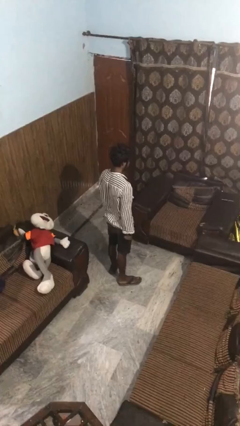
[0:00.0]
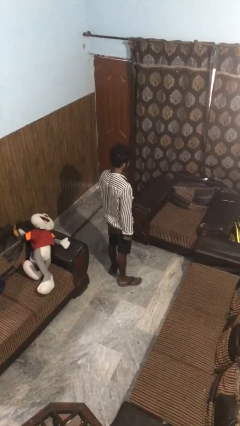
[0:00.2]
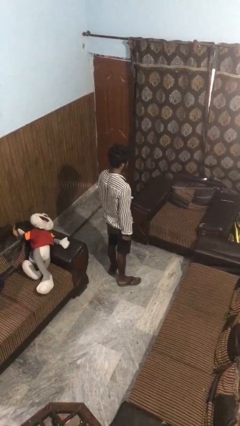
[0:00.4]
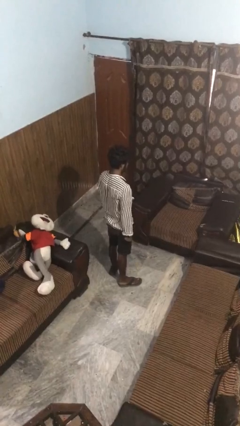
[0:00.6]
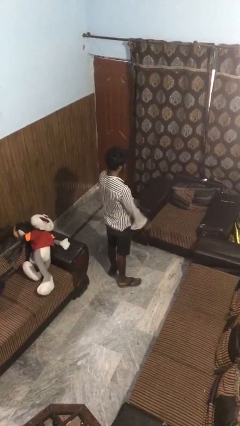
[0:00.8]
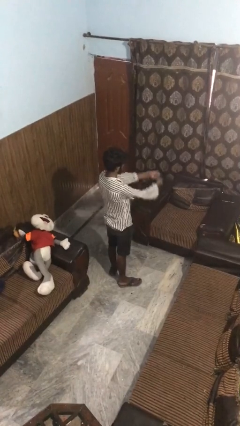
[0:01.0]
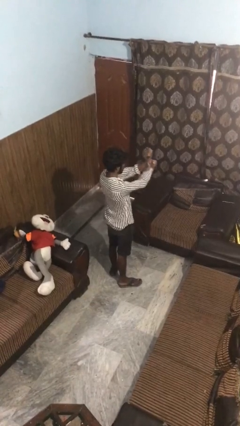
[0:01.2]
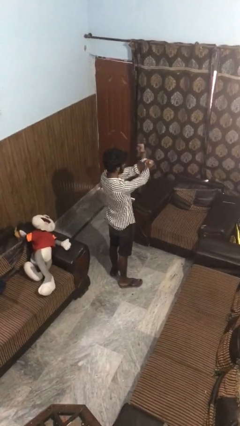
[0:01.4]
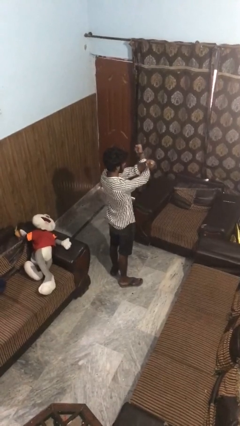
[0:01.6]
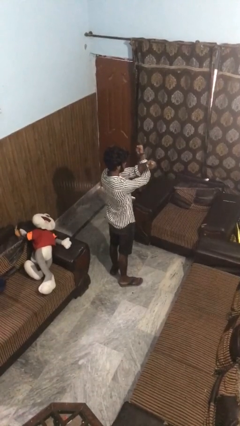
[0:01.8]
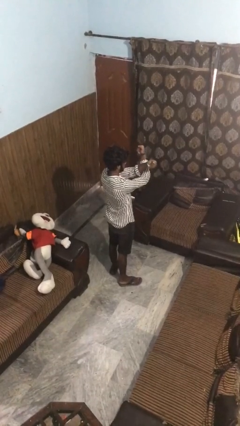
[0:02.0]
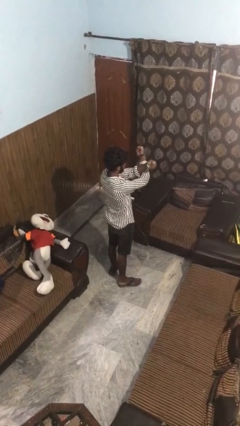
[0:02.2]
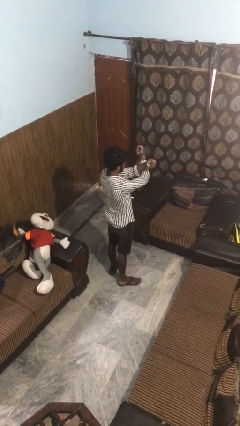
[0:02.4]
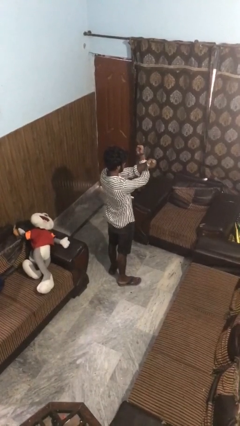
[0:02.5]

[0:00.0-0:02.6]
person gestures arms x

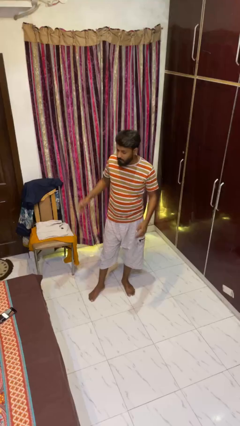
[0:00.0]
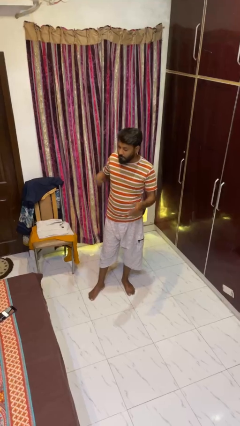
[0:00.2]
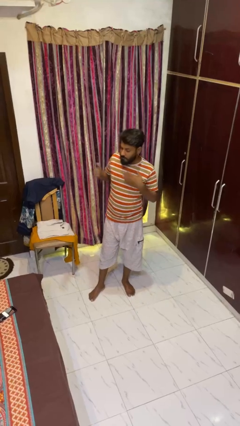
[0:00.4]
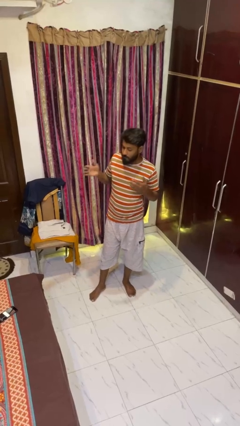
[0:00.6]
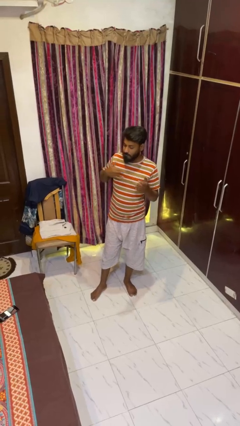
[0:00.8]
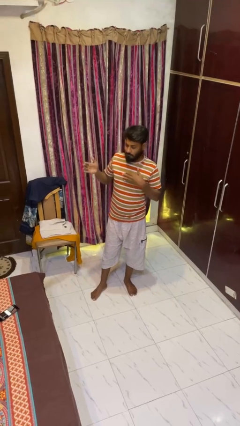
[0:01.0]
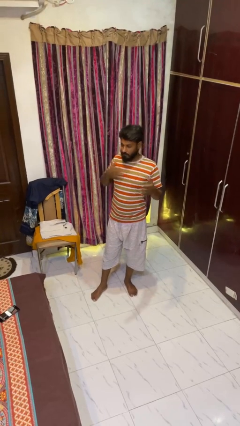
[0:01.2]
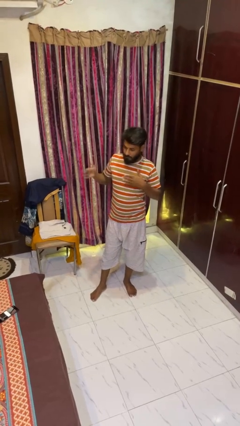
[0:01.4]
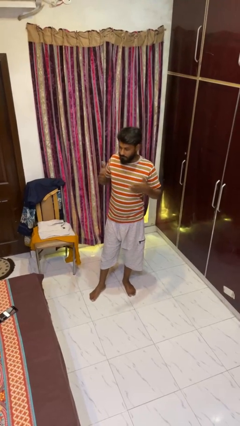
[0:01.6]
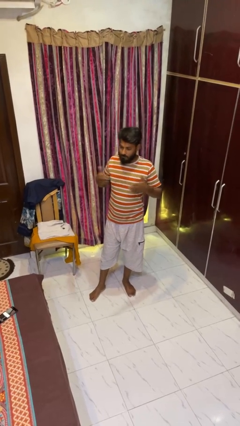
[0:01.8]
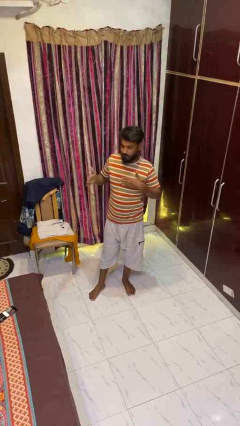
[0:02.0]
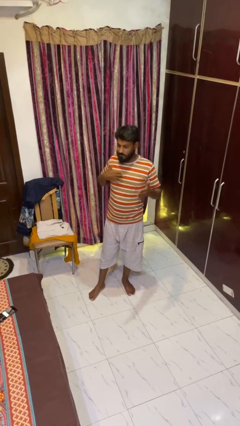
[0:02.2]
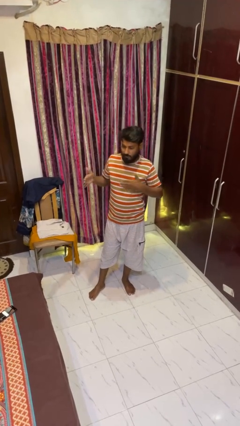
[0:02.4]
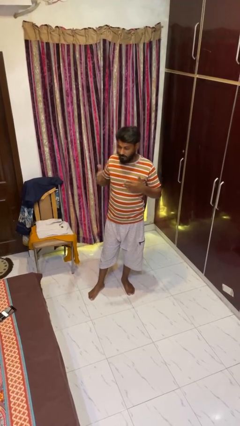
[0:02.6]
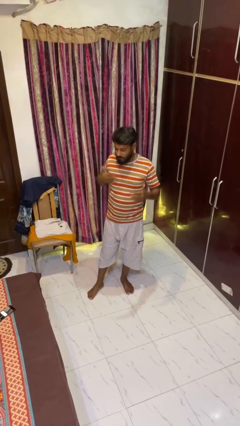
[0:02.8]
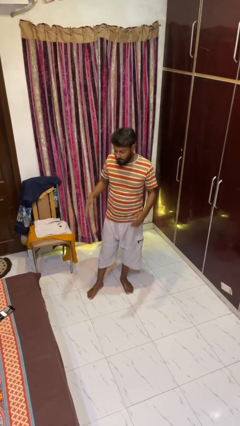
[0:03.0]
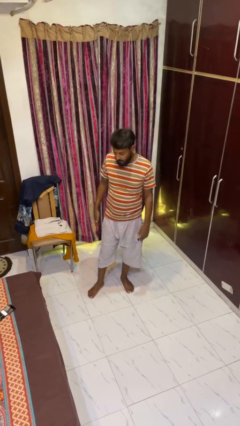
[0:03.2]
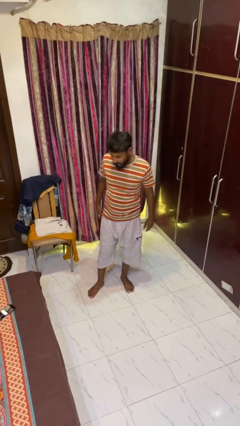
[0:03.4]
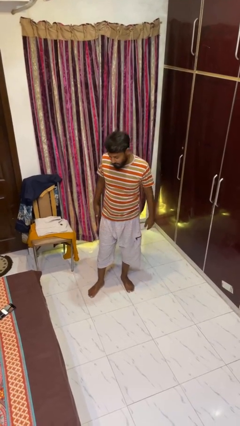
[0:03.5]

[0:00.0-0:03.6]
person drums on chest

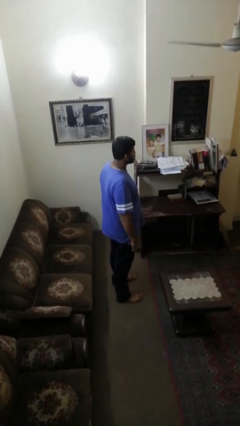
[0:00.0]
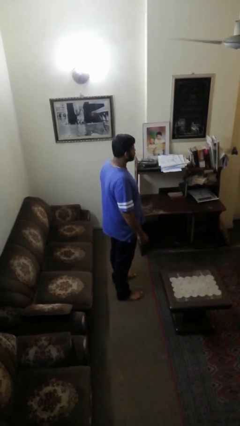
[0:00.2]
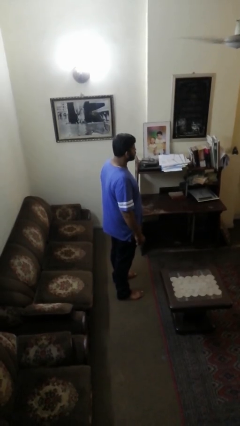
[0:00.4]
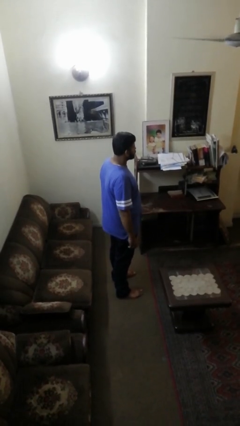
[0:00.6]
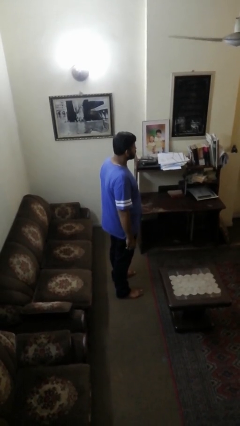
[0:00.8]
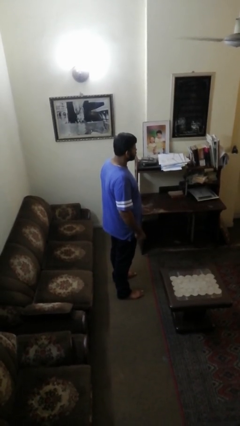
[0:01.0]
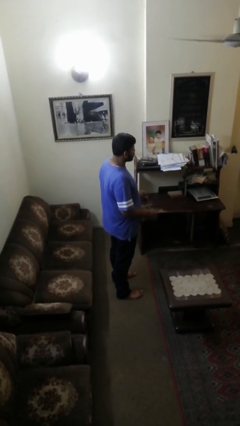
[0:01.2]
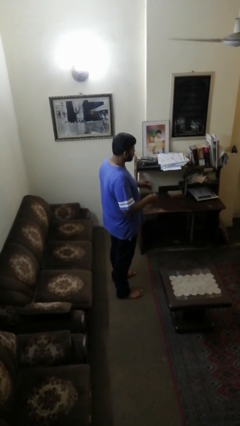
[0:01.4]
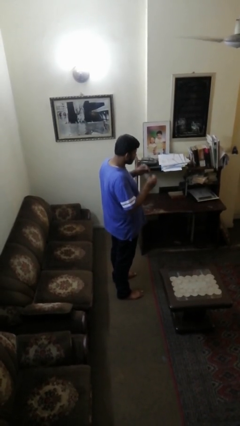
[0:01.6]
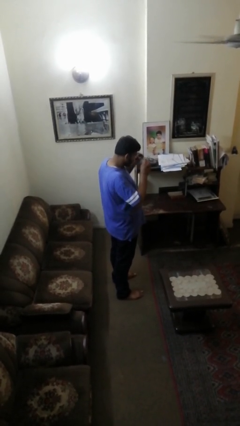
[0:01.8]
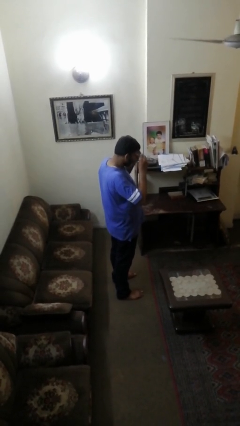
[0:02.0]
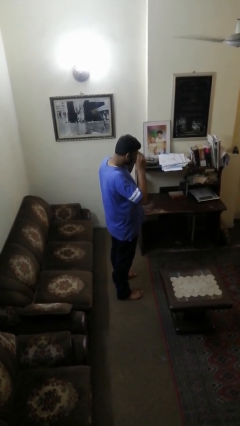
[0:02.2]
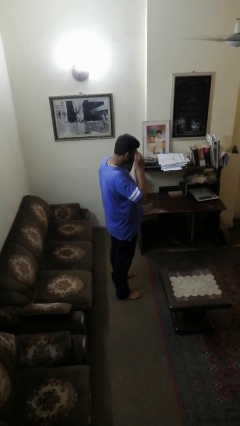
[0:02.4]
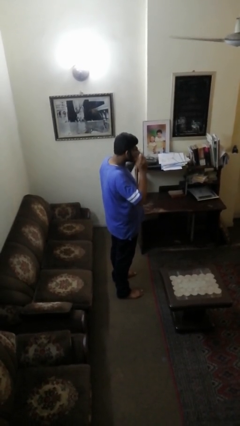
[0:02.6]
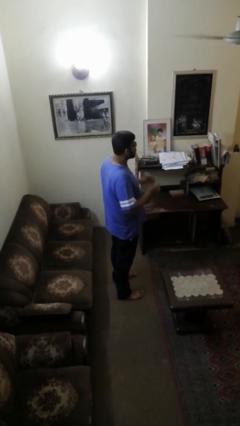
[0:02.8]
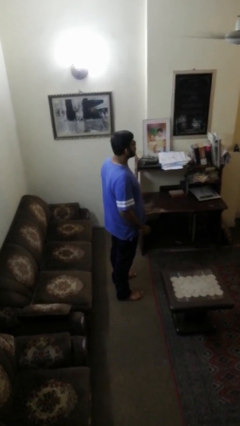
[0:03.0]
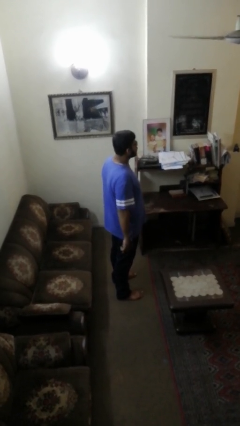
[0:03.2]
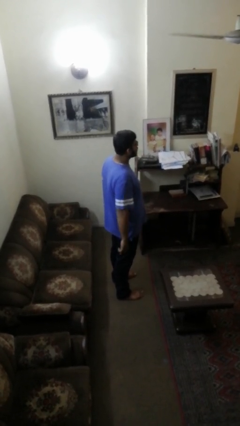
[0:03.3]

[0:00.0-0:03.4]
person puts on sunglasses

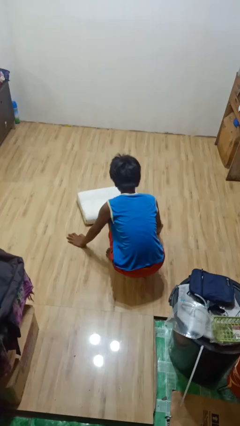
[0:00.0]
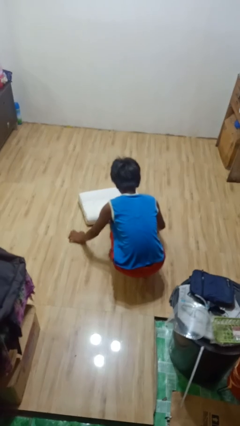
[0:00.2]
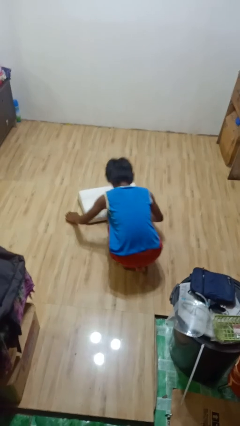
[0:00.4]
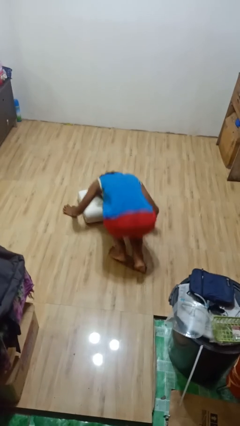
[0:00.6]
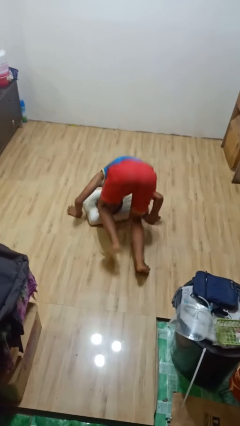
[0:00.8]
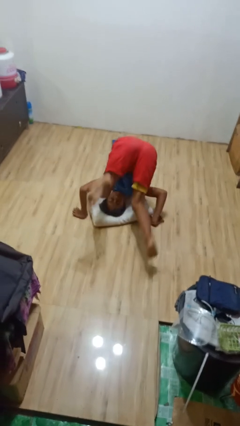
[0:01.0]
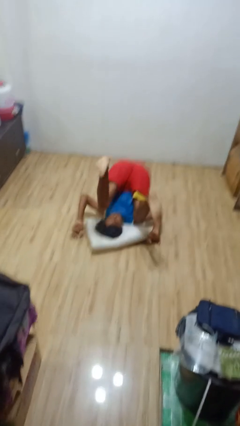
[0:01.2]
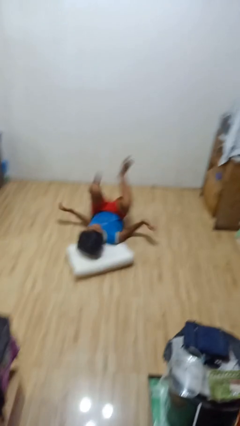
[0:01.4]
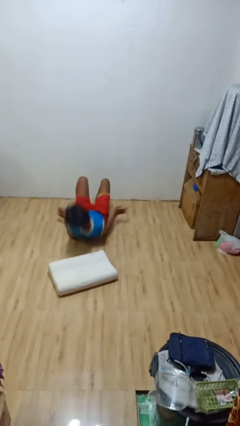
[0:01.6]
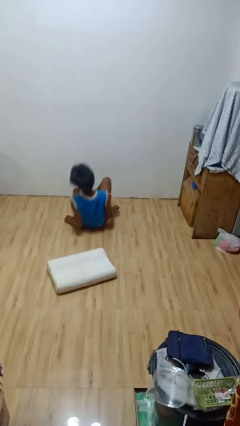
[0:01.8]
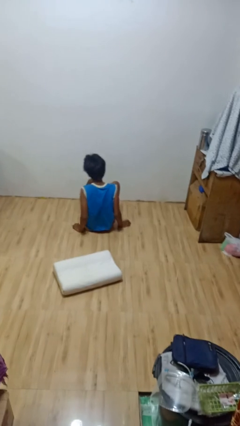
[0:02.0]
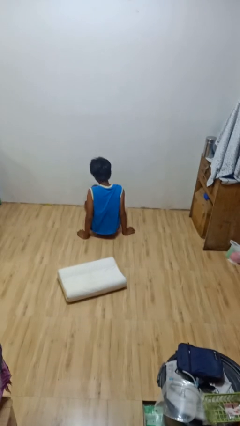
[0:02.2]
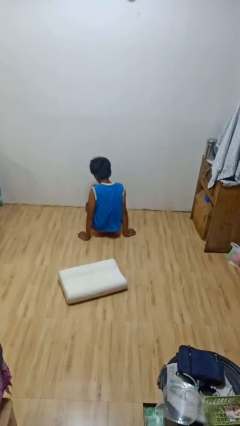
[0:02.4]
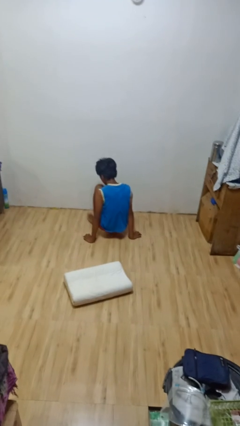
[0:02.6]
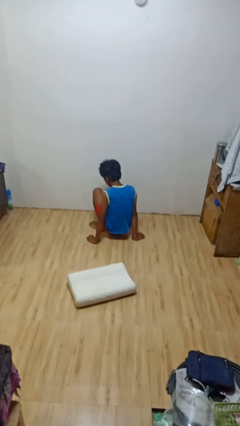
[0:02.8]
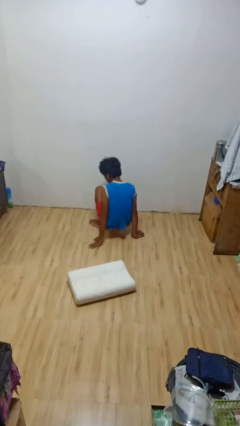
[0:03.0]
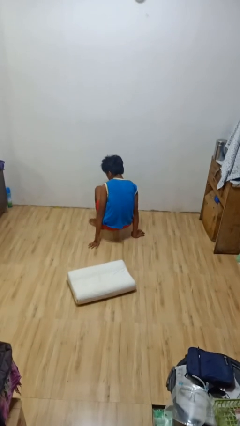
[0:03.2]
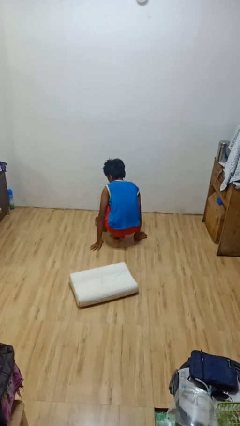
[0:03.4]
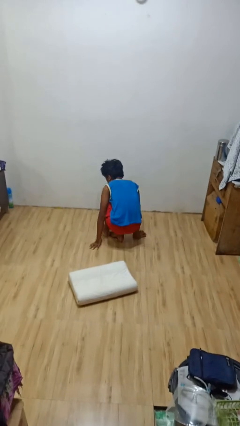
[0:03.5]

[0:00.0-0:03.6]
person somersaults

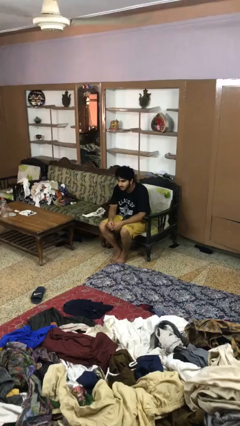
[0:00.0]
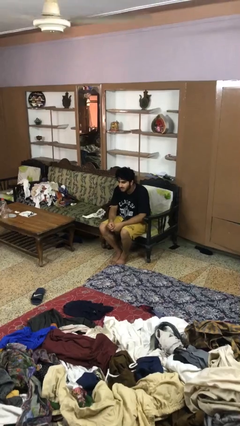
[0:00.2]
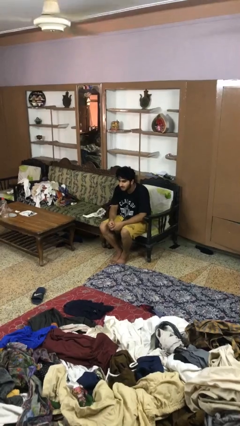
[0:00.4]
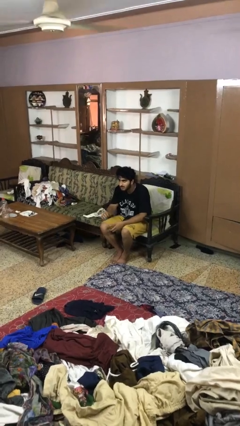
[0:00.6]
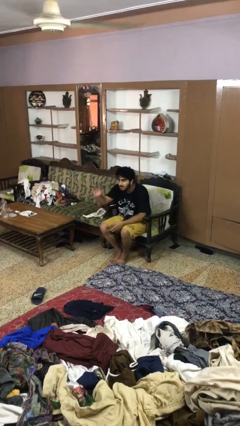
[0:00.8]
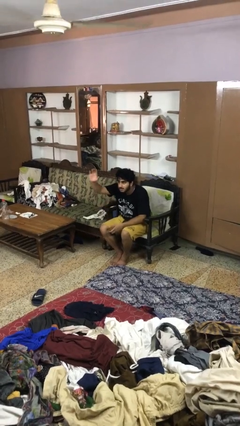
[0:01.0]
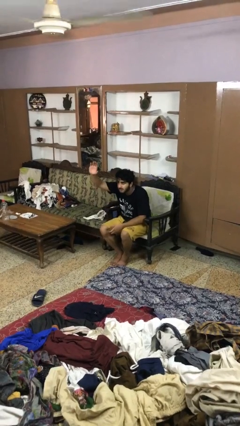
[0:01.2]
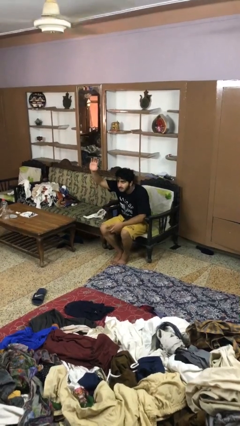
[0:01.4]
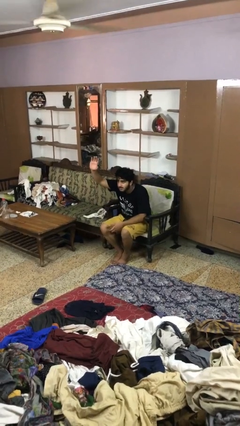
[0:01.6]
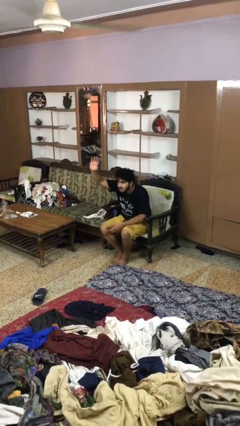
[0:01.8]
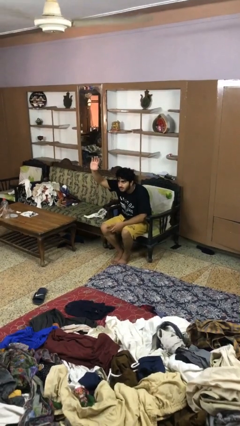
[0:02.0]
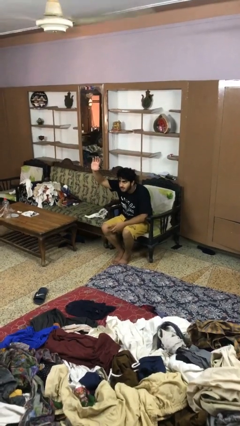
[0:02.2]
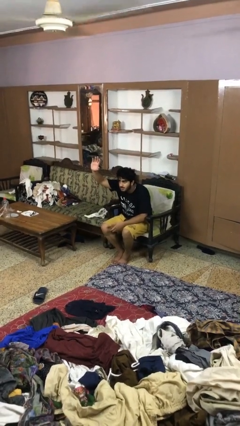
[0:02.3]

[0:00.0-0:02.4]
person gestures raise hand

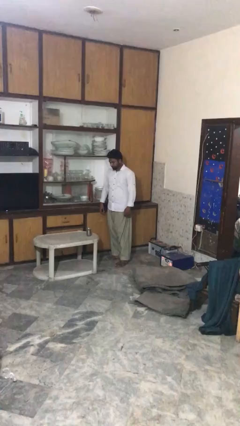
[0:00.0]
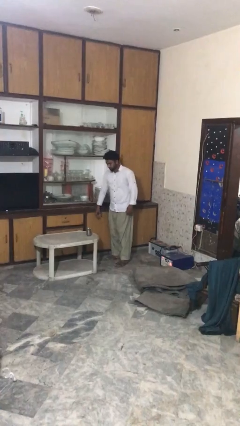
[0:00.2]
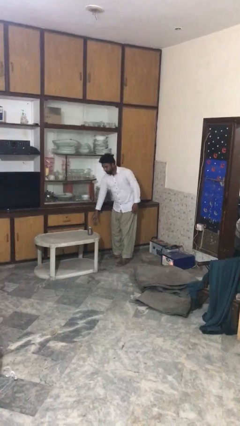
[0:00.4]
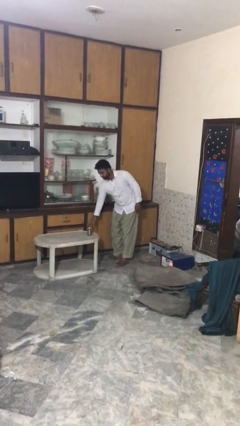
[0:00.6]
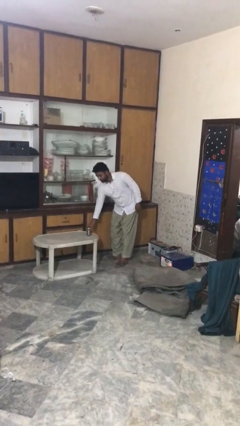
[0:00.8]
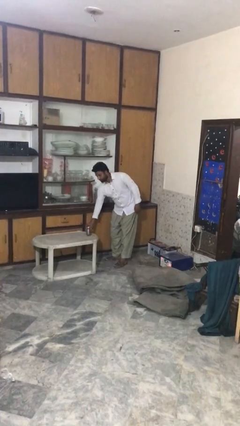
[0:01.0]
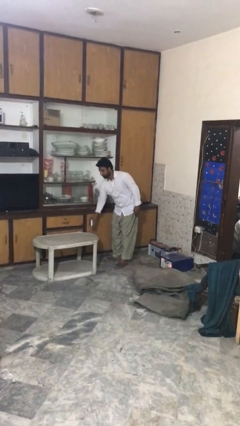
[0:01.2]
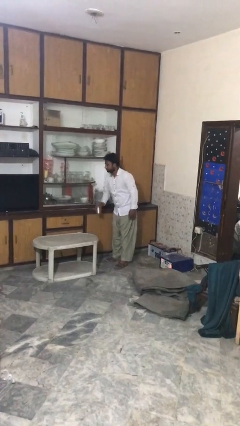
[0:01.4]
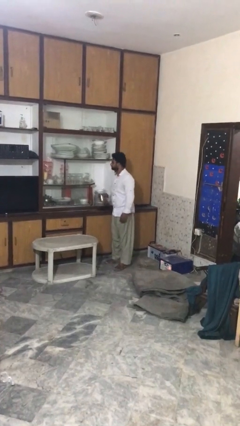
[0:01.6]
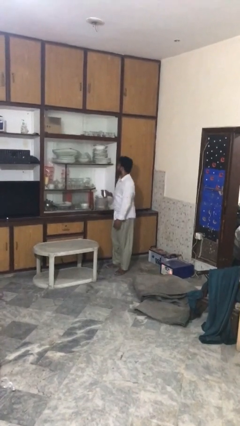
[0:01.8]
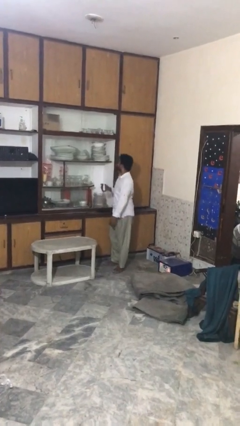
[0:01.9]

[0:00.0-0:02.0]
person picks up object from table
